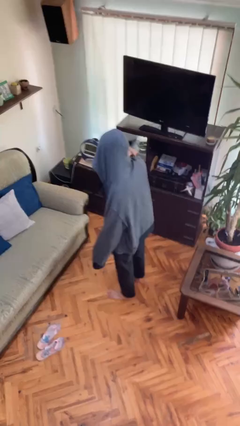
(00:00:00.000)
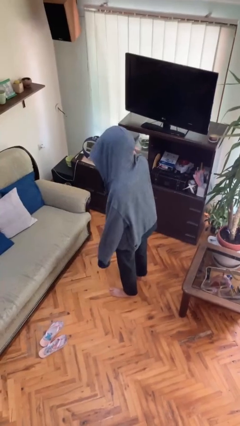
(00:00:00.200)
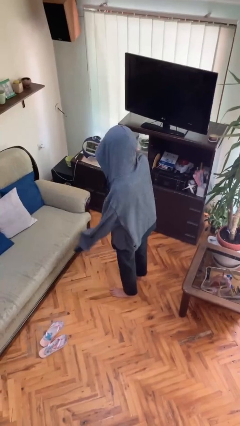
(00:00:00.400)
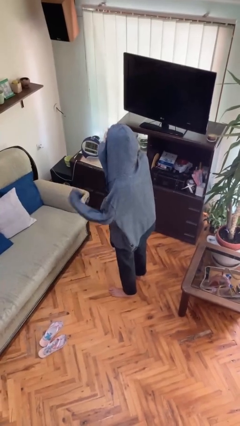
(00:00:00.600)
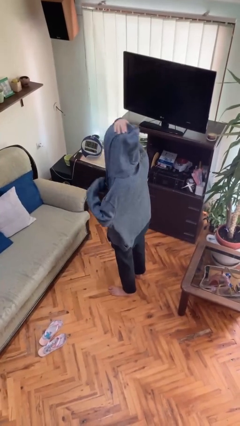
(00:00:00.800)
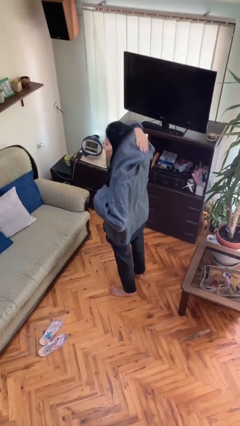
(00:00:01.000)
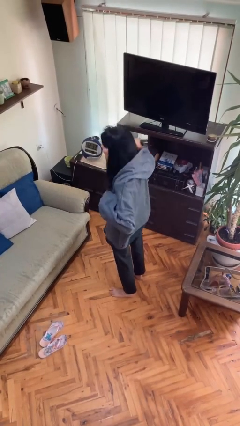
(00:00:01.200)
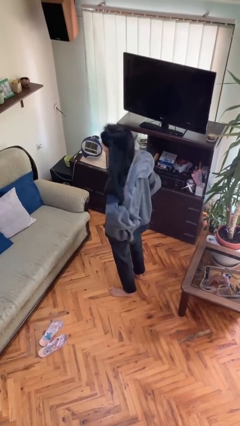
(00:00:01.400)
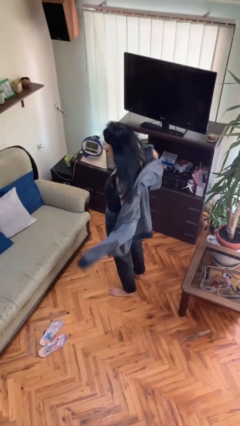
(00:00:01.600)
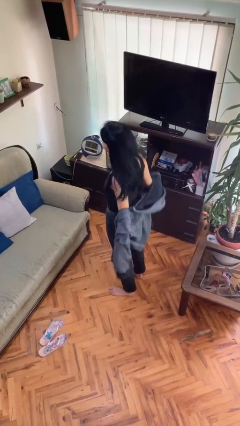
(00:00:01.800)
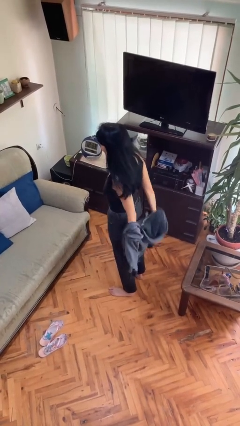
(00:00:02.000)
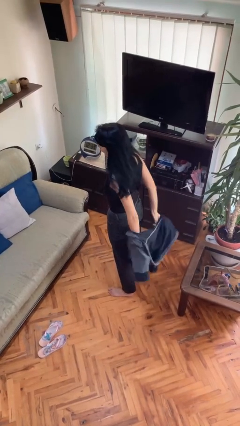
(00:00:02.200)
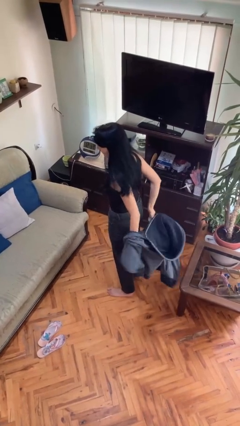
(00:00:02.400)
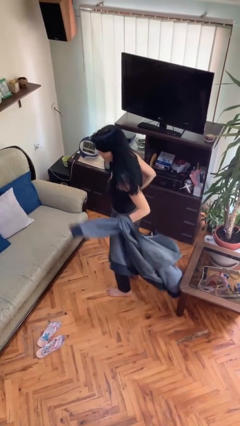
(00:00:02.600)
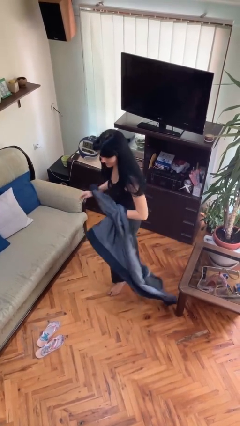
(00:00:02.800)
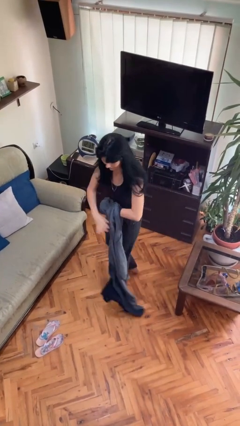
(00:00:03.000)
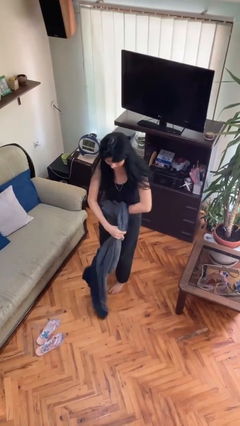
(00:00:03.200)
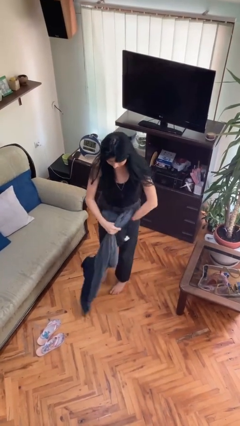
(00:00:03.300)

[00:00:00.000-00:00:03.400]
person takes off hoodie

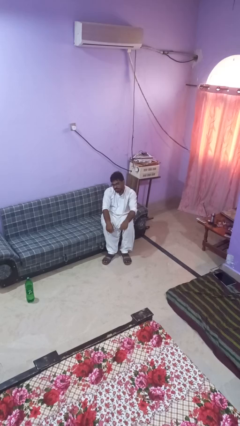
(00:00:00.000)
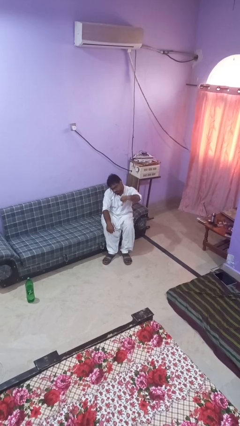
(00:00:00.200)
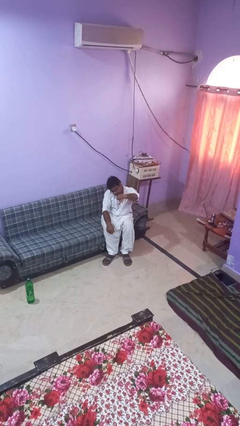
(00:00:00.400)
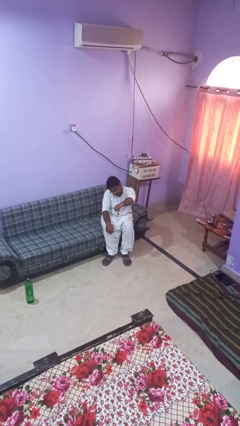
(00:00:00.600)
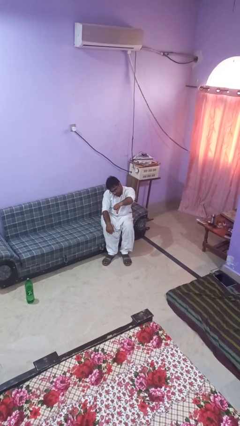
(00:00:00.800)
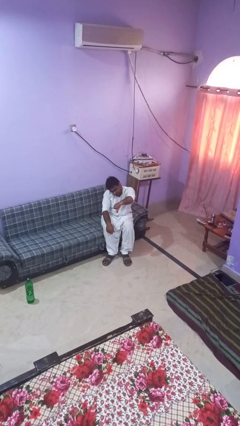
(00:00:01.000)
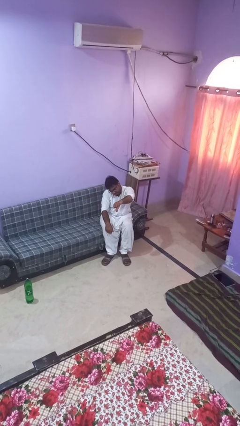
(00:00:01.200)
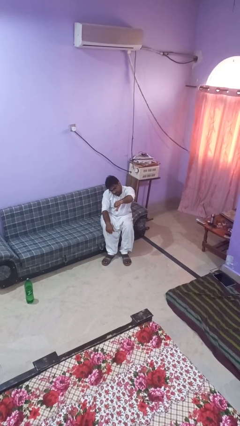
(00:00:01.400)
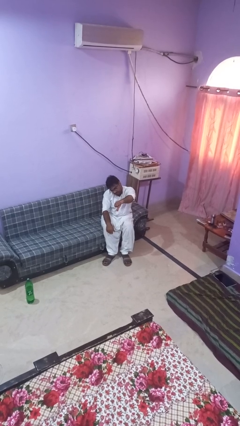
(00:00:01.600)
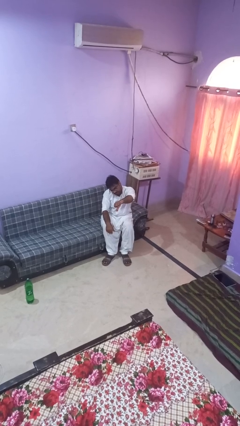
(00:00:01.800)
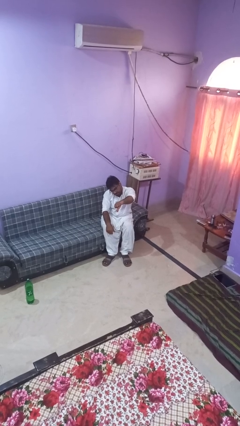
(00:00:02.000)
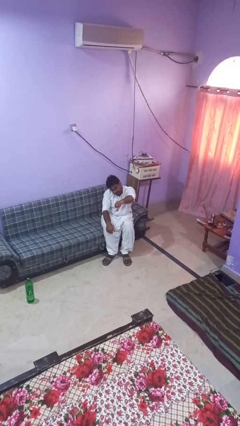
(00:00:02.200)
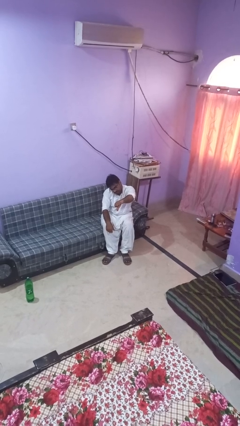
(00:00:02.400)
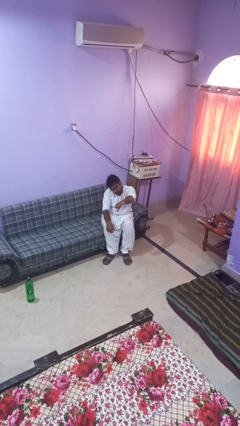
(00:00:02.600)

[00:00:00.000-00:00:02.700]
person gestures thumbs down

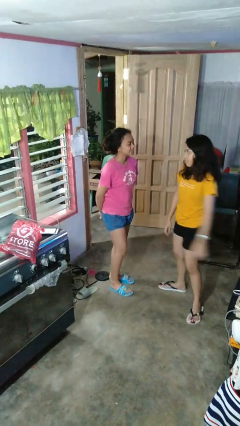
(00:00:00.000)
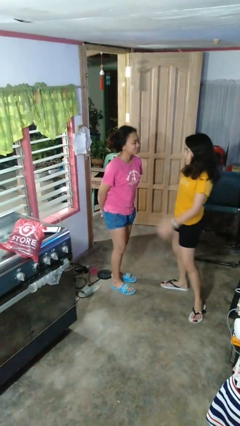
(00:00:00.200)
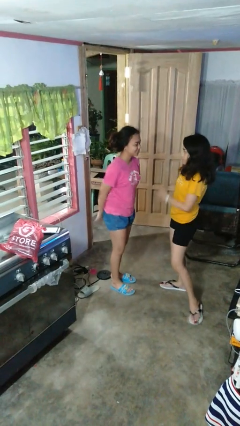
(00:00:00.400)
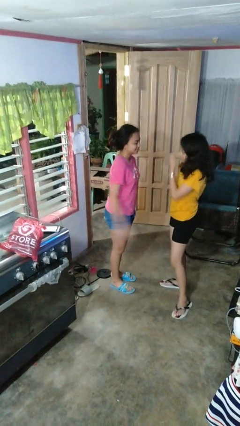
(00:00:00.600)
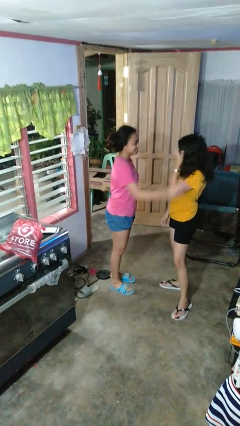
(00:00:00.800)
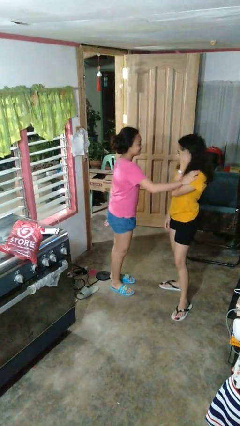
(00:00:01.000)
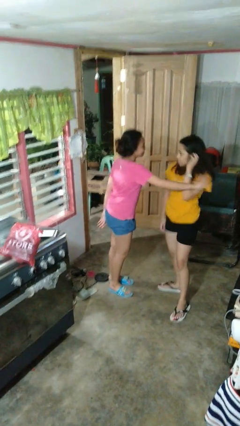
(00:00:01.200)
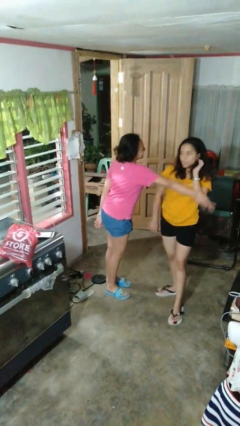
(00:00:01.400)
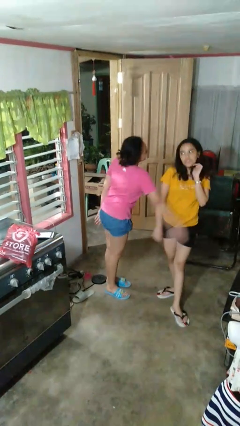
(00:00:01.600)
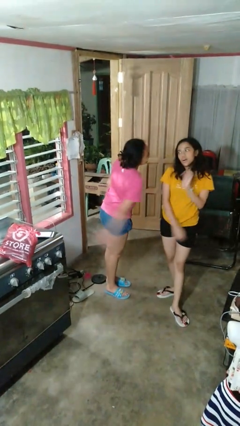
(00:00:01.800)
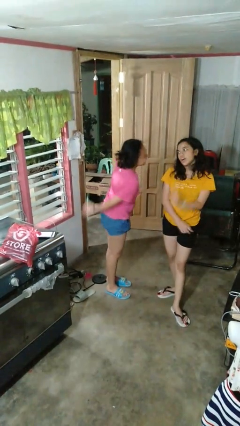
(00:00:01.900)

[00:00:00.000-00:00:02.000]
person shoves person

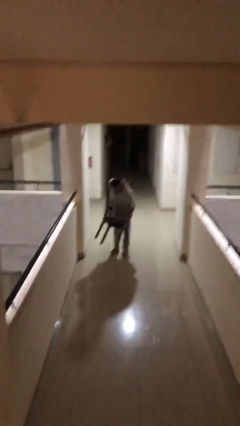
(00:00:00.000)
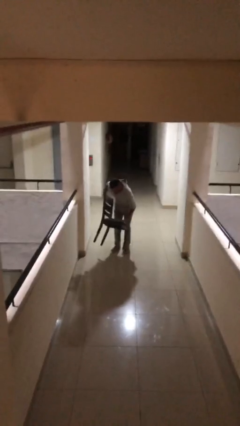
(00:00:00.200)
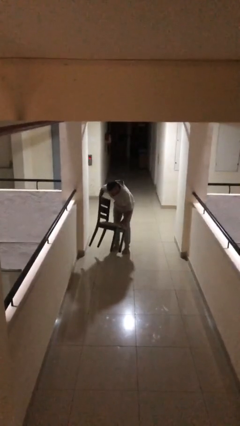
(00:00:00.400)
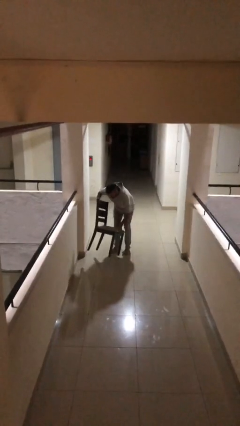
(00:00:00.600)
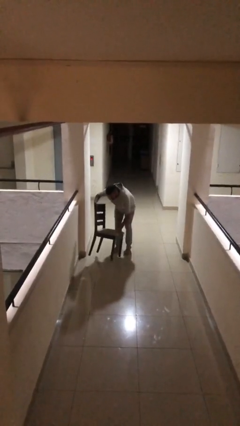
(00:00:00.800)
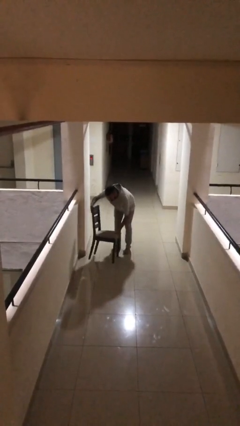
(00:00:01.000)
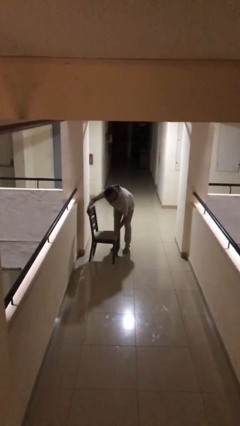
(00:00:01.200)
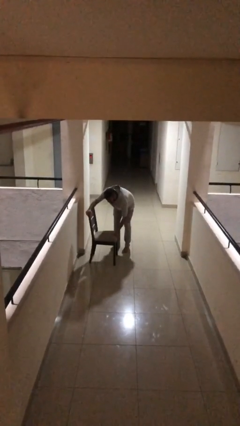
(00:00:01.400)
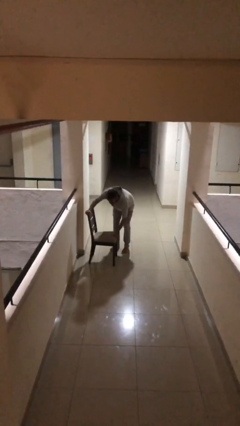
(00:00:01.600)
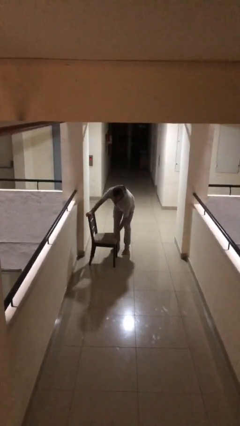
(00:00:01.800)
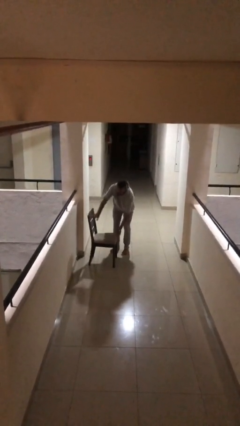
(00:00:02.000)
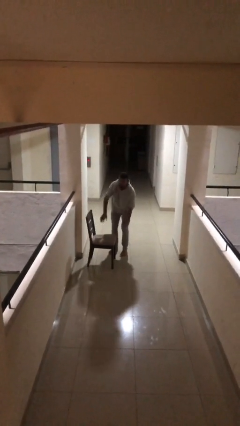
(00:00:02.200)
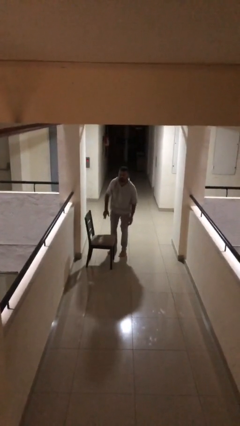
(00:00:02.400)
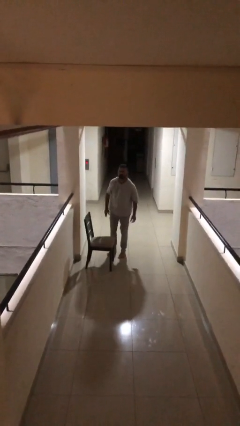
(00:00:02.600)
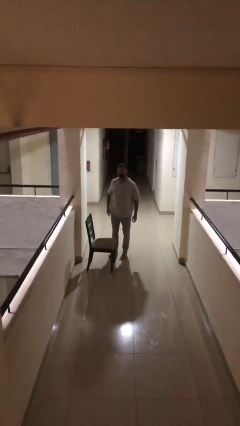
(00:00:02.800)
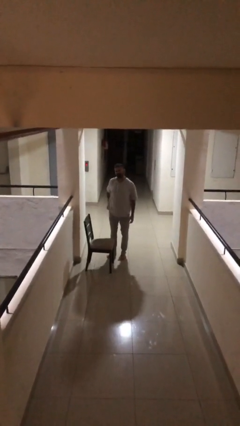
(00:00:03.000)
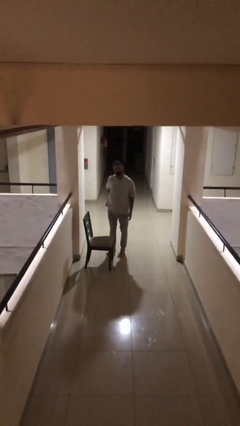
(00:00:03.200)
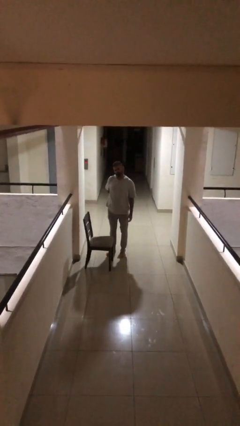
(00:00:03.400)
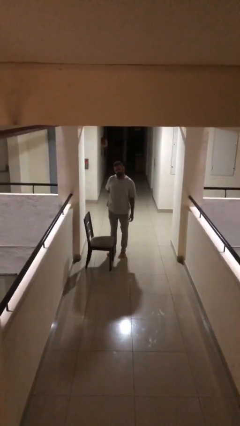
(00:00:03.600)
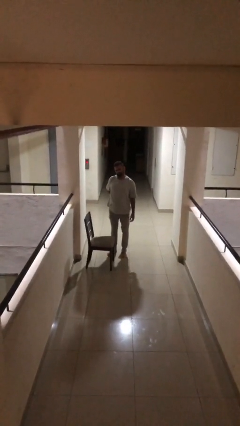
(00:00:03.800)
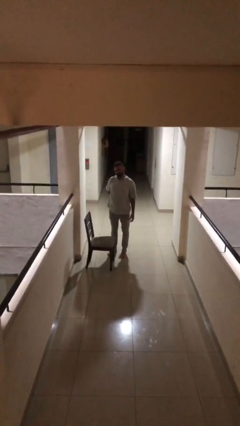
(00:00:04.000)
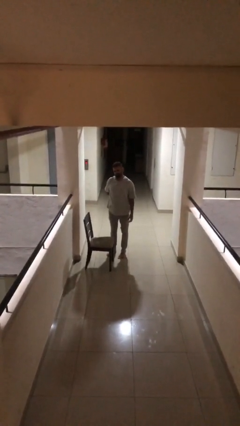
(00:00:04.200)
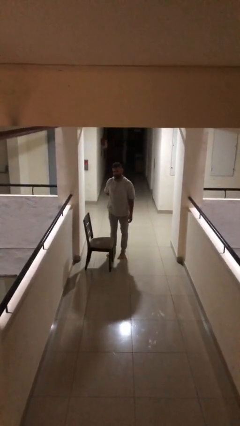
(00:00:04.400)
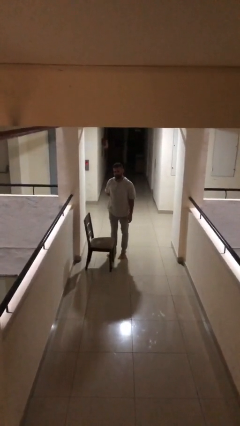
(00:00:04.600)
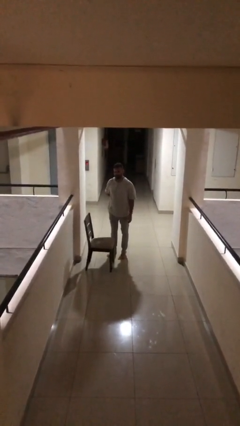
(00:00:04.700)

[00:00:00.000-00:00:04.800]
person puts down object on floor

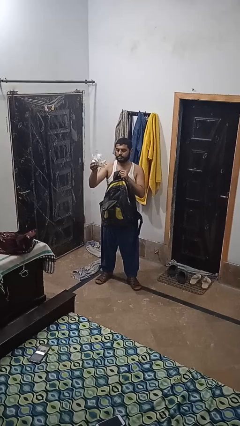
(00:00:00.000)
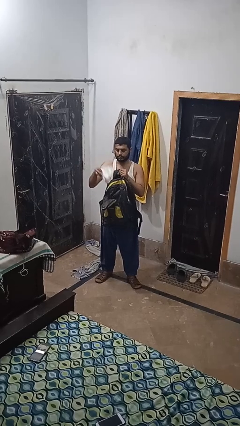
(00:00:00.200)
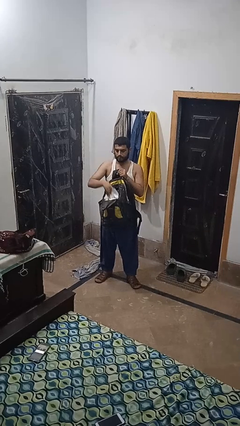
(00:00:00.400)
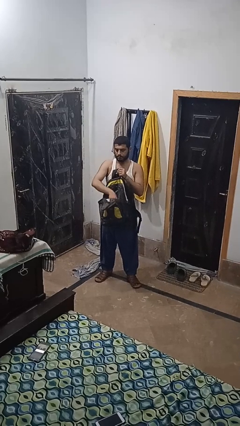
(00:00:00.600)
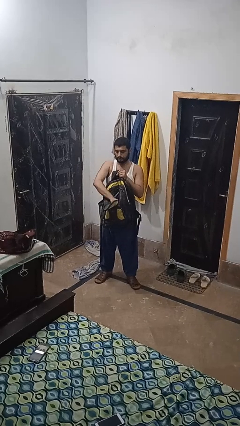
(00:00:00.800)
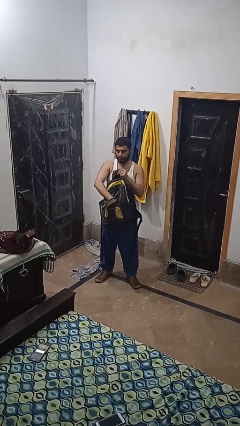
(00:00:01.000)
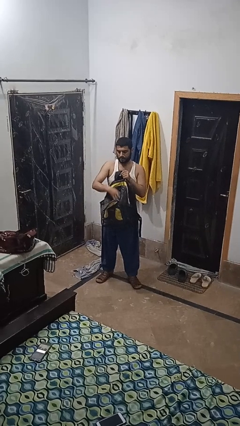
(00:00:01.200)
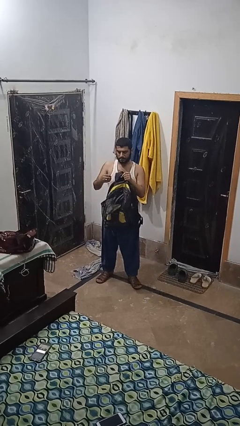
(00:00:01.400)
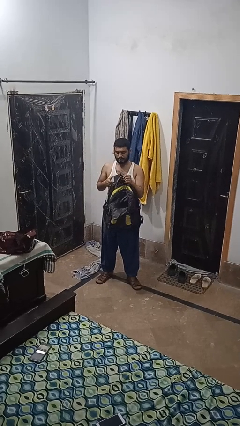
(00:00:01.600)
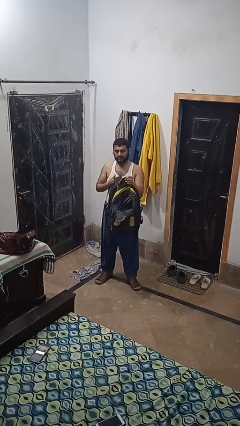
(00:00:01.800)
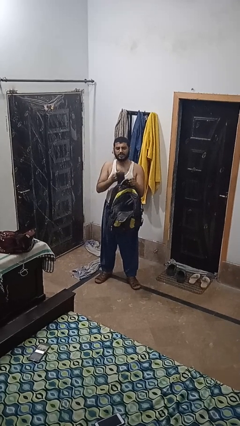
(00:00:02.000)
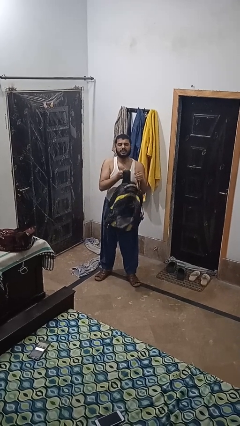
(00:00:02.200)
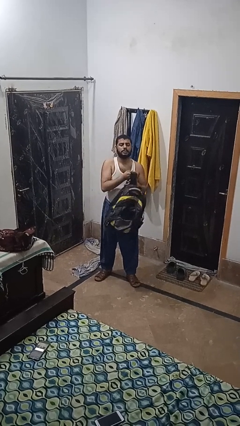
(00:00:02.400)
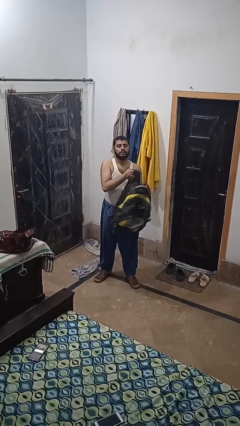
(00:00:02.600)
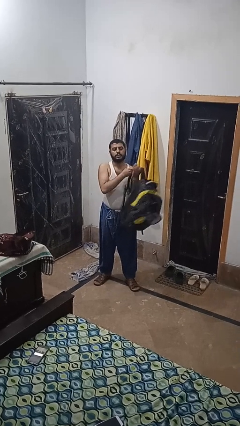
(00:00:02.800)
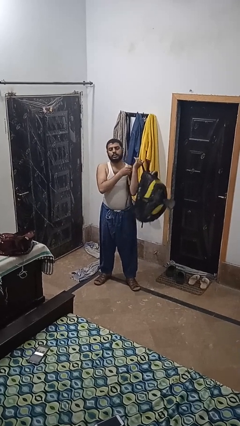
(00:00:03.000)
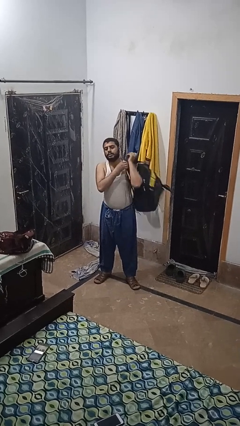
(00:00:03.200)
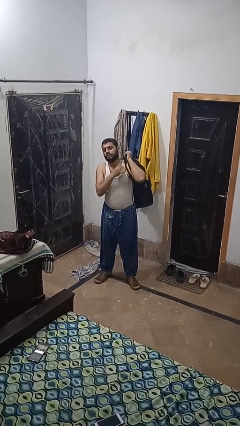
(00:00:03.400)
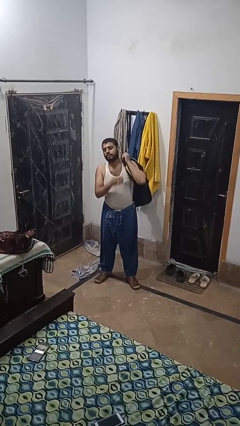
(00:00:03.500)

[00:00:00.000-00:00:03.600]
person puts object into backpack

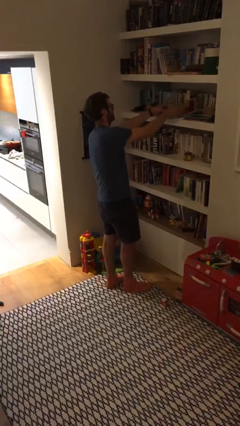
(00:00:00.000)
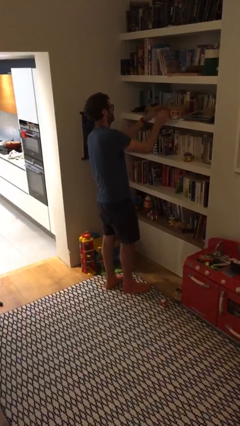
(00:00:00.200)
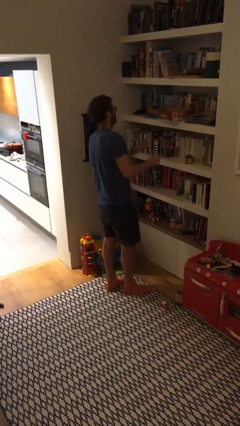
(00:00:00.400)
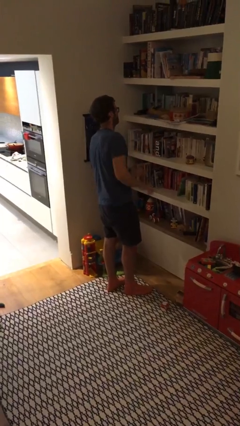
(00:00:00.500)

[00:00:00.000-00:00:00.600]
person puts down object on shelf
